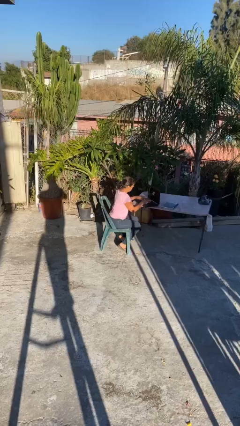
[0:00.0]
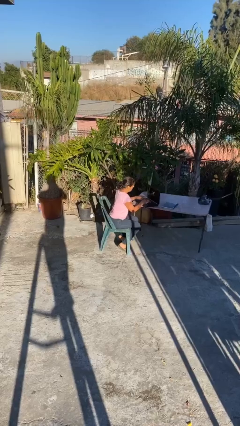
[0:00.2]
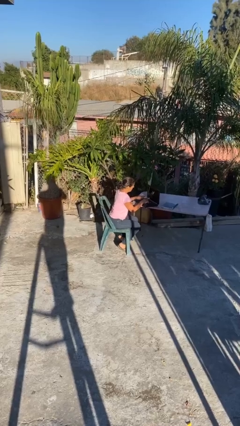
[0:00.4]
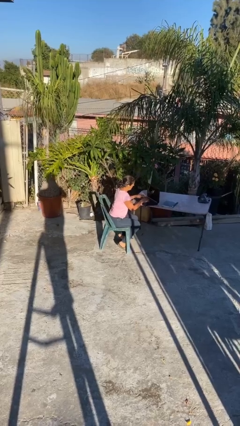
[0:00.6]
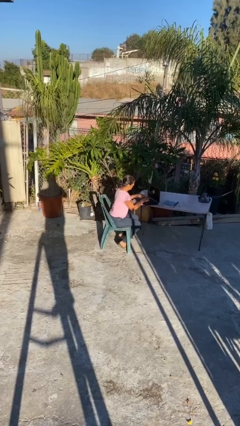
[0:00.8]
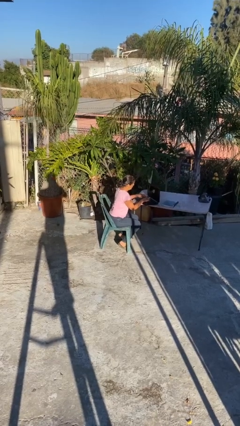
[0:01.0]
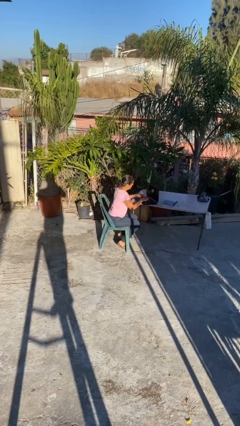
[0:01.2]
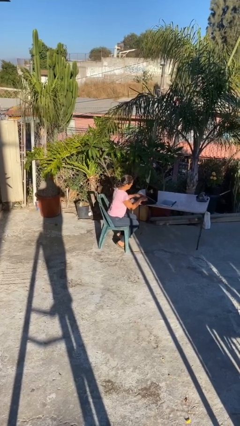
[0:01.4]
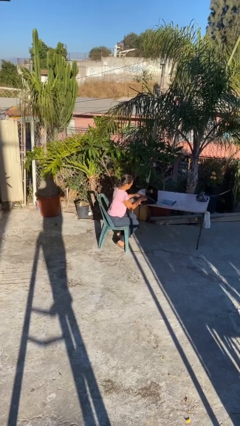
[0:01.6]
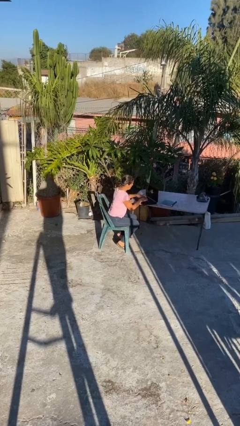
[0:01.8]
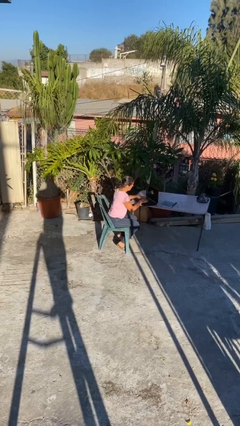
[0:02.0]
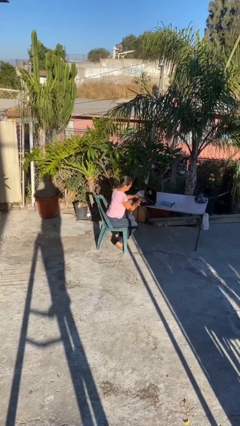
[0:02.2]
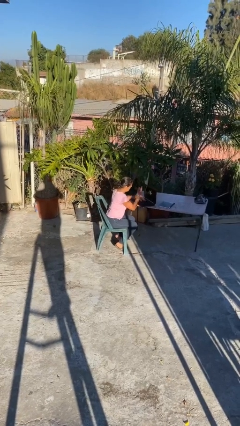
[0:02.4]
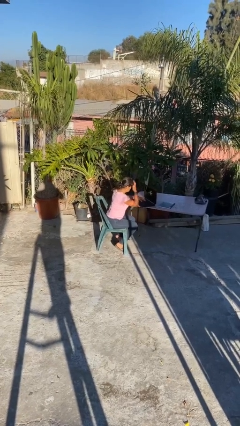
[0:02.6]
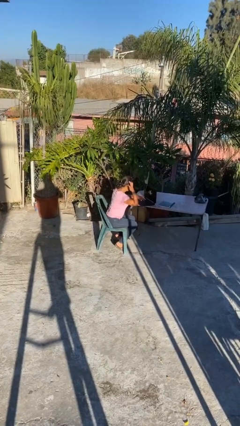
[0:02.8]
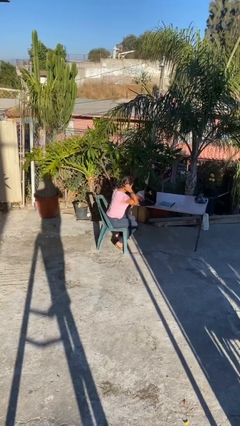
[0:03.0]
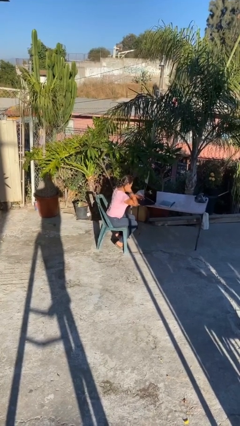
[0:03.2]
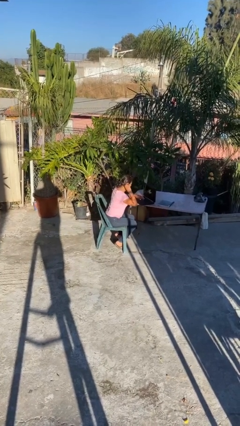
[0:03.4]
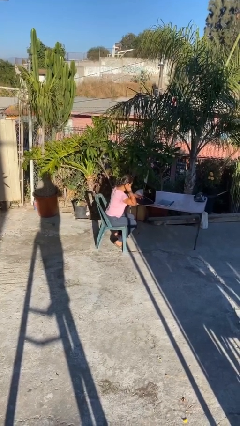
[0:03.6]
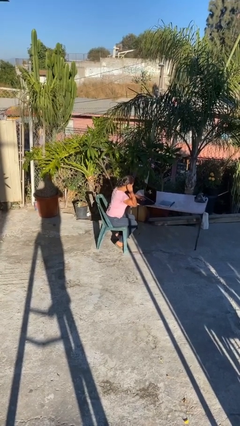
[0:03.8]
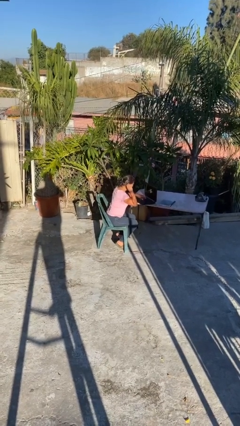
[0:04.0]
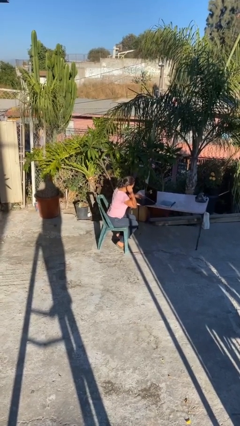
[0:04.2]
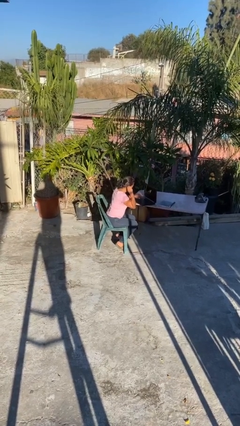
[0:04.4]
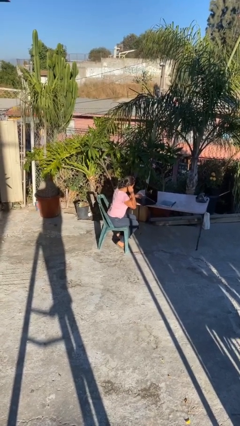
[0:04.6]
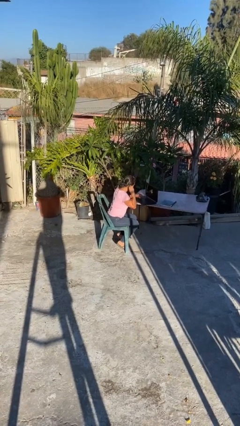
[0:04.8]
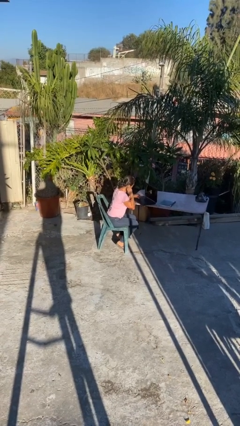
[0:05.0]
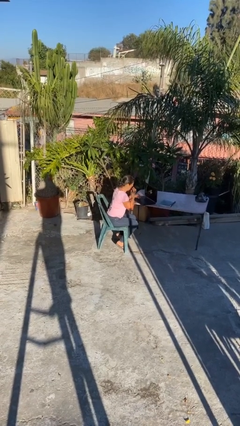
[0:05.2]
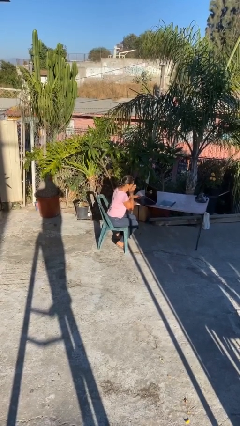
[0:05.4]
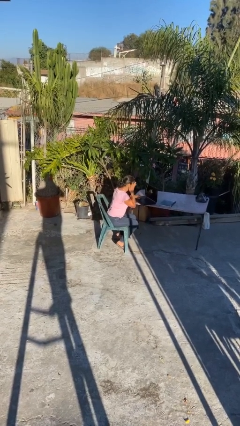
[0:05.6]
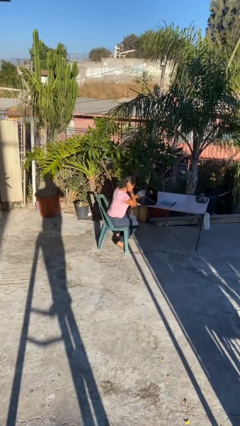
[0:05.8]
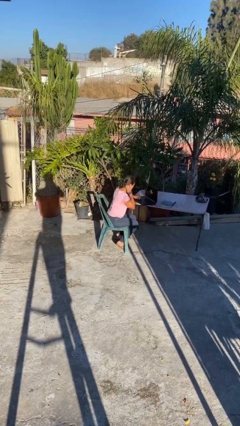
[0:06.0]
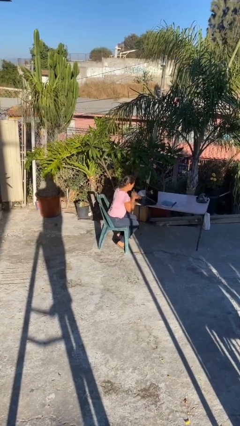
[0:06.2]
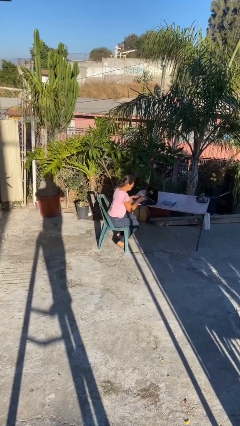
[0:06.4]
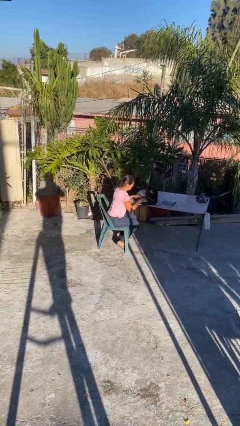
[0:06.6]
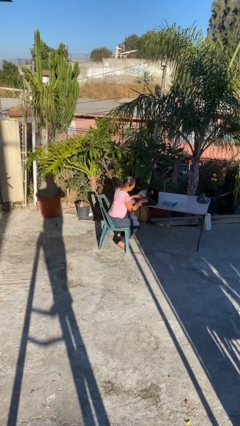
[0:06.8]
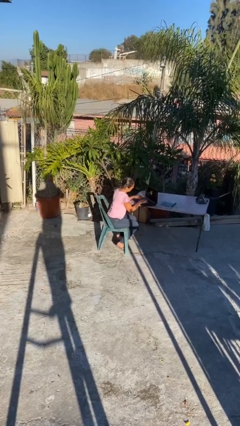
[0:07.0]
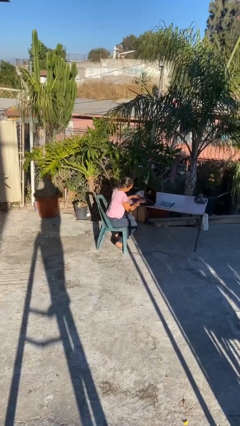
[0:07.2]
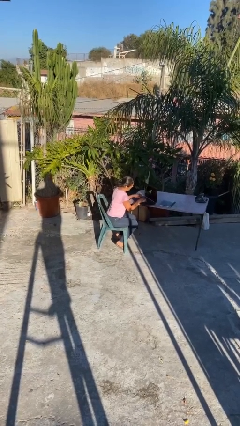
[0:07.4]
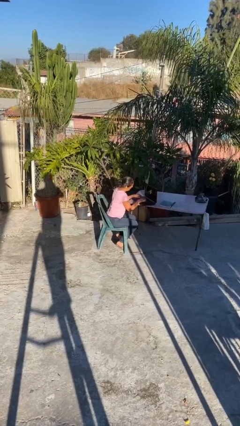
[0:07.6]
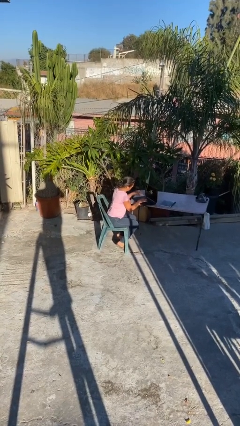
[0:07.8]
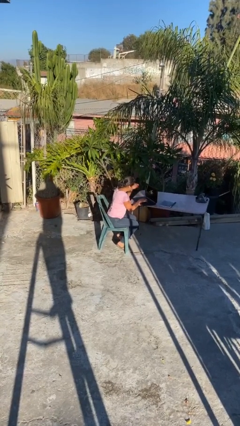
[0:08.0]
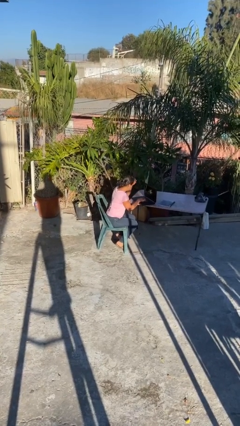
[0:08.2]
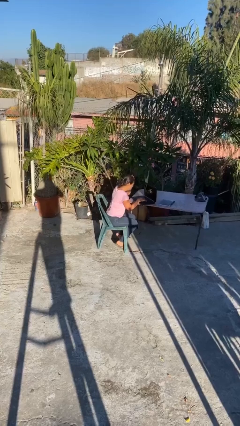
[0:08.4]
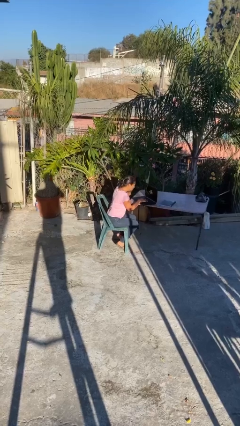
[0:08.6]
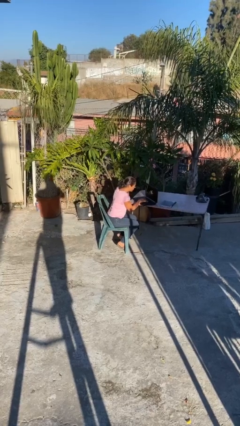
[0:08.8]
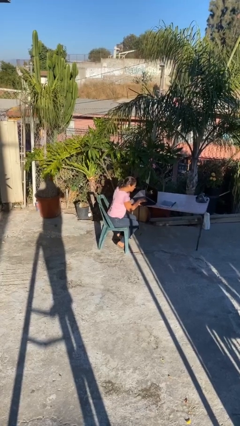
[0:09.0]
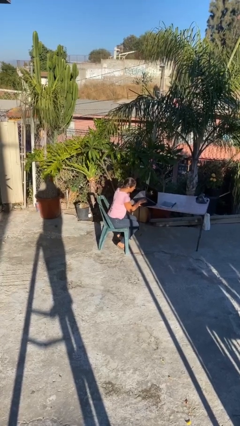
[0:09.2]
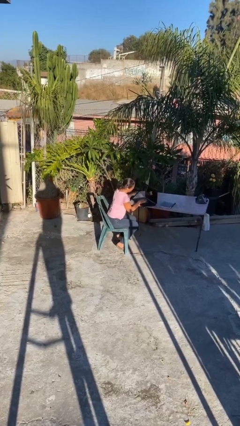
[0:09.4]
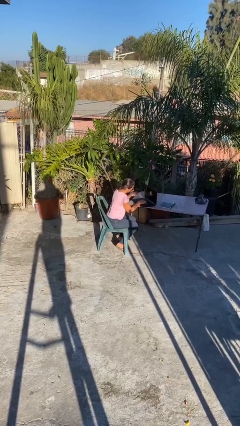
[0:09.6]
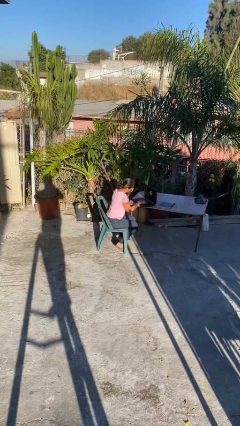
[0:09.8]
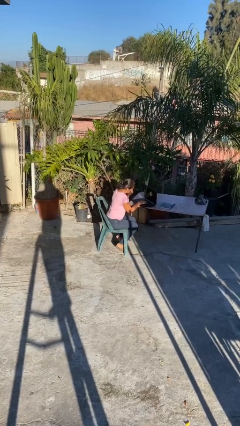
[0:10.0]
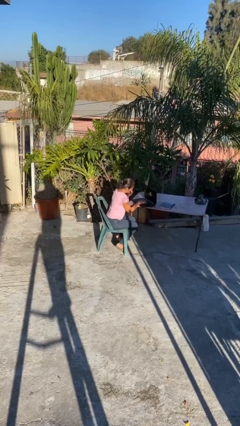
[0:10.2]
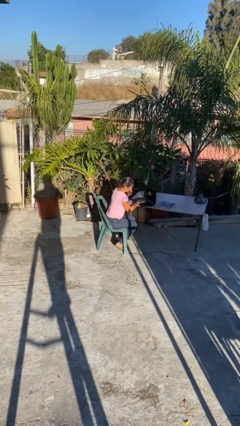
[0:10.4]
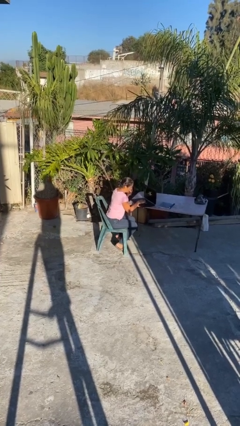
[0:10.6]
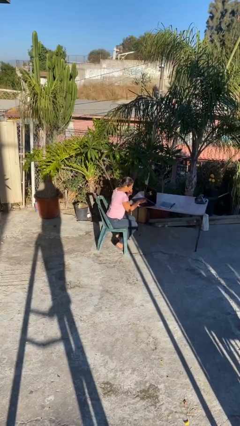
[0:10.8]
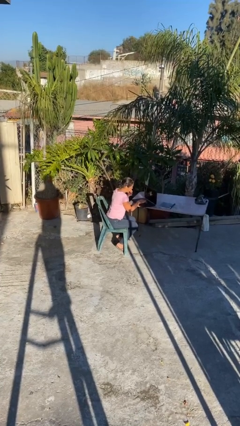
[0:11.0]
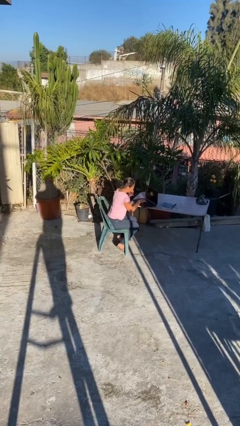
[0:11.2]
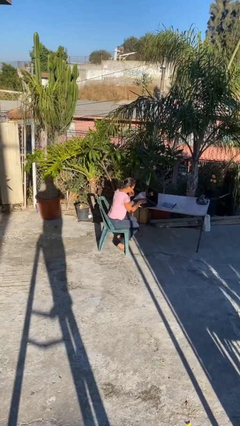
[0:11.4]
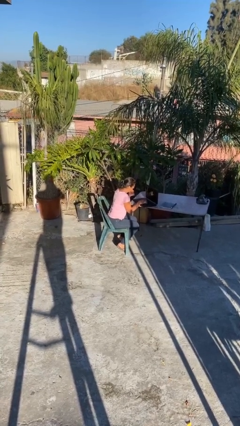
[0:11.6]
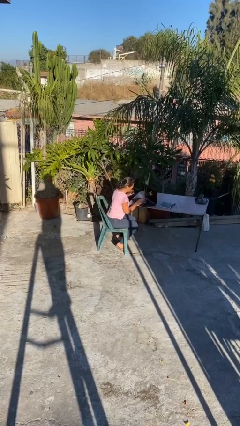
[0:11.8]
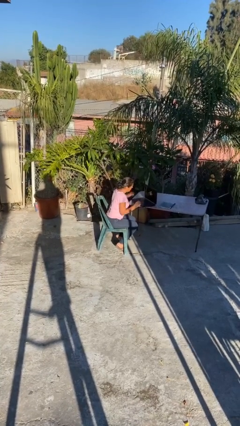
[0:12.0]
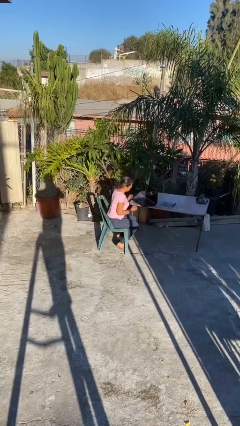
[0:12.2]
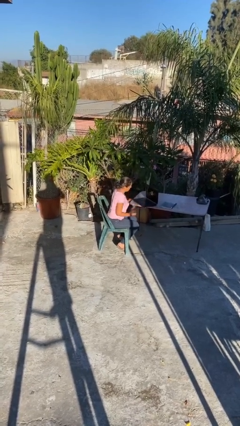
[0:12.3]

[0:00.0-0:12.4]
person interacts with laptop

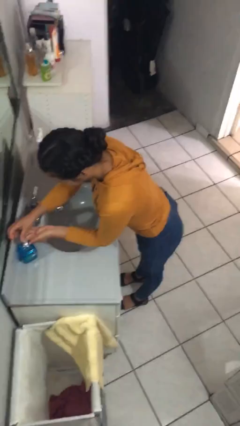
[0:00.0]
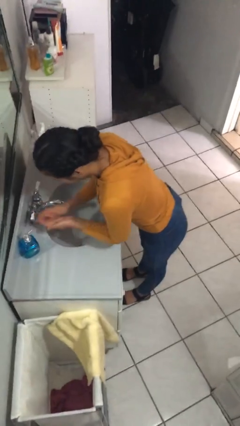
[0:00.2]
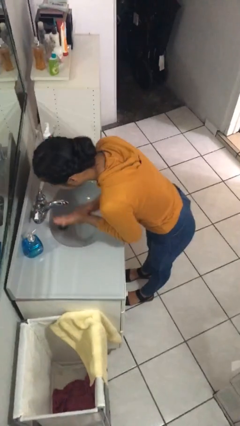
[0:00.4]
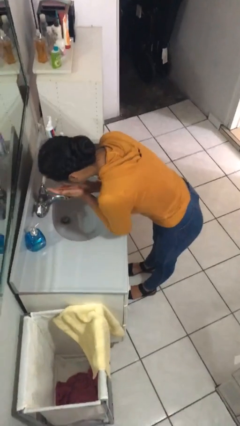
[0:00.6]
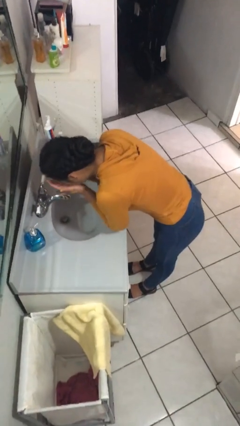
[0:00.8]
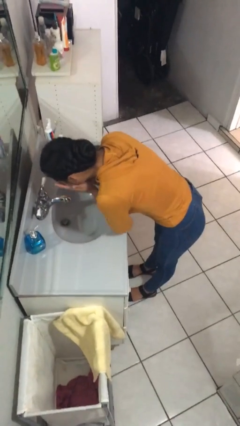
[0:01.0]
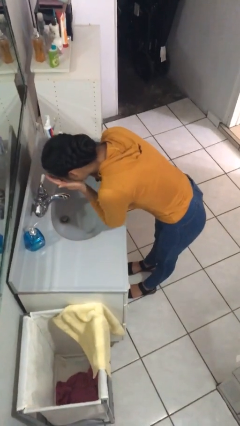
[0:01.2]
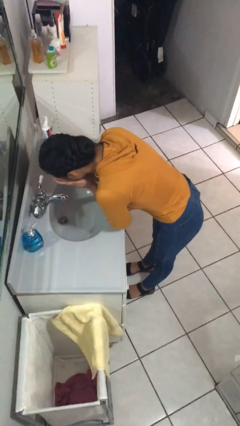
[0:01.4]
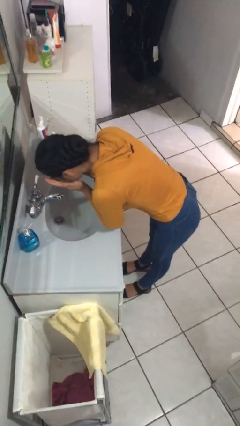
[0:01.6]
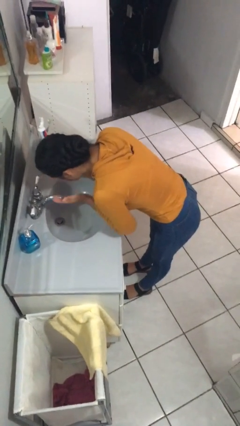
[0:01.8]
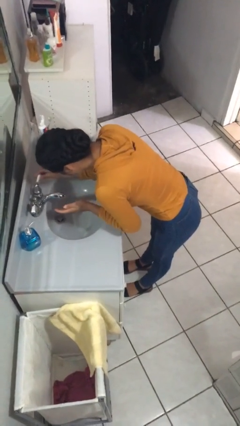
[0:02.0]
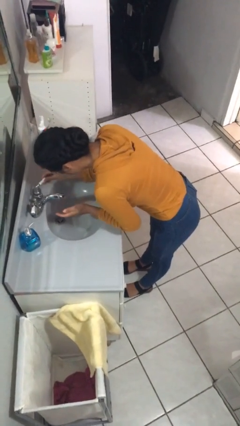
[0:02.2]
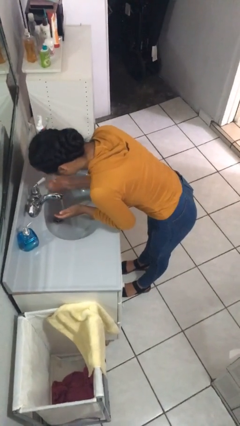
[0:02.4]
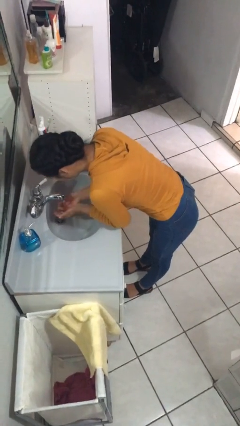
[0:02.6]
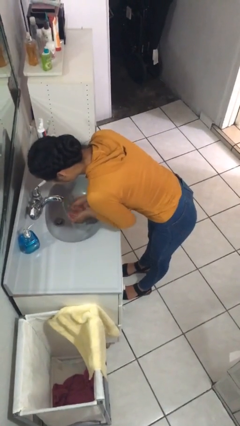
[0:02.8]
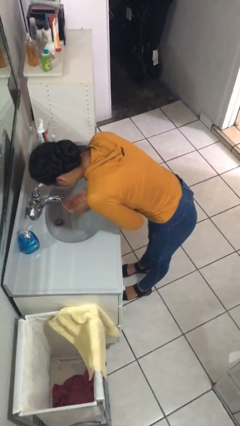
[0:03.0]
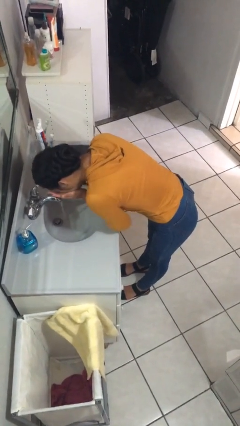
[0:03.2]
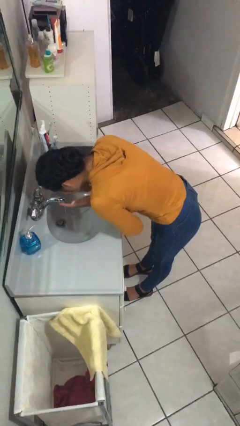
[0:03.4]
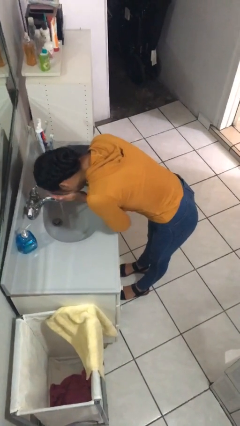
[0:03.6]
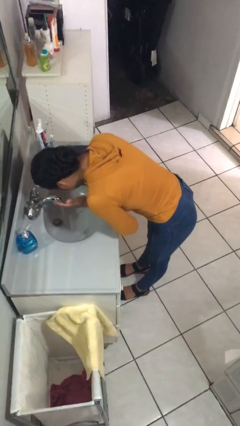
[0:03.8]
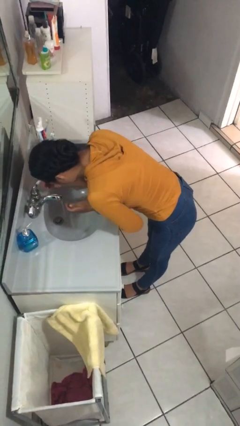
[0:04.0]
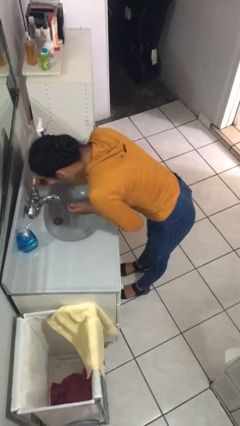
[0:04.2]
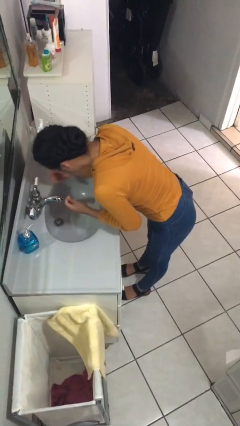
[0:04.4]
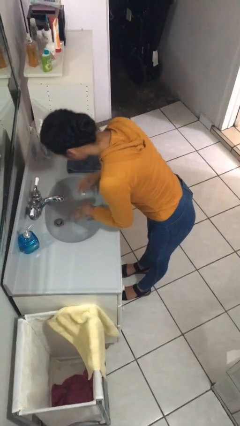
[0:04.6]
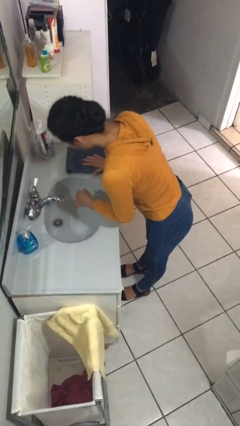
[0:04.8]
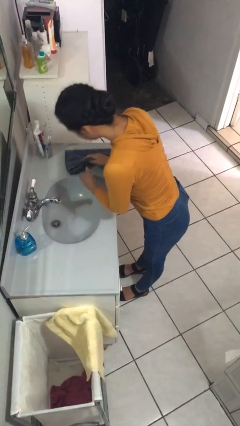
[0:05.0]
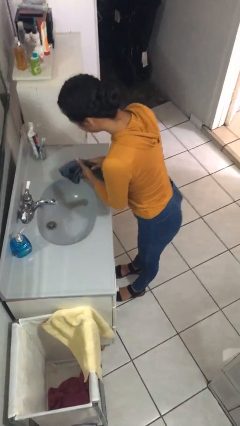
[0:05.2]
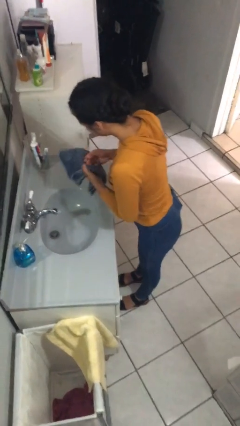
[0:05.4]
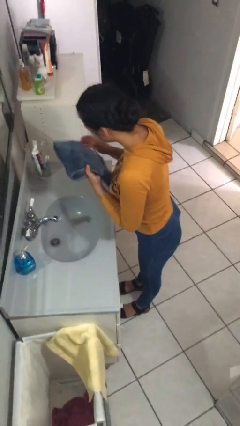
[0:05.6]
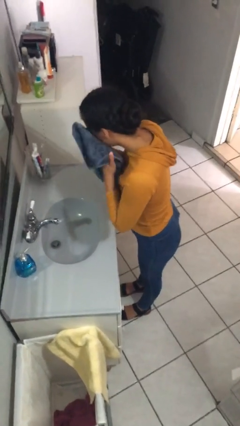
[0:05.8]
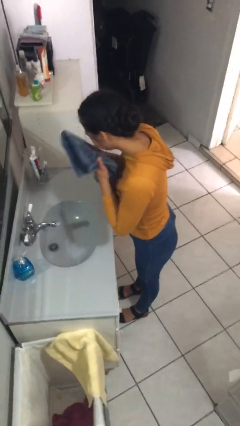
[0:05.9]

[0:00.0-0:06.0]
person washes face
